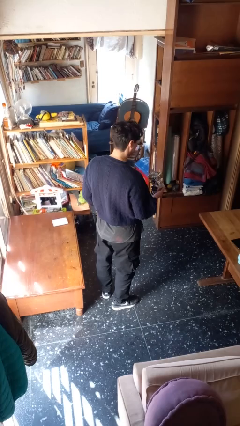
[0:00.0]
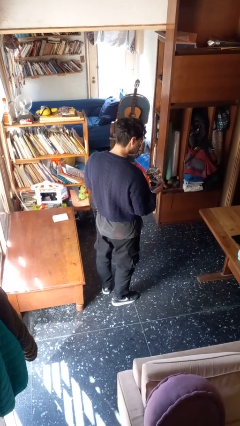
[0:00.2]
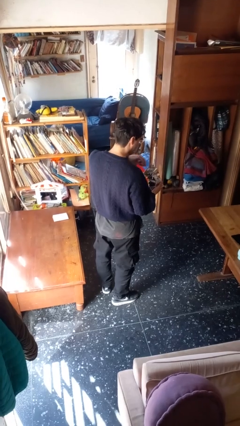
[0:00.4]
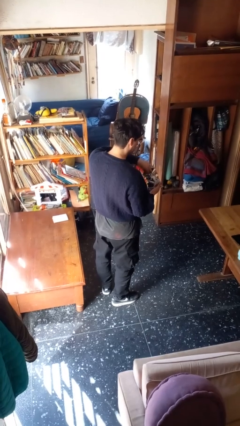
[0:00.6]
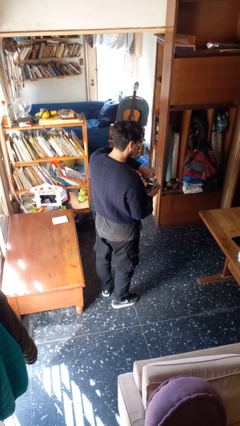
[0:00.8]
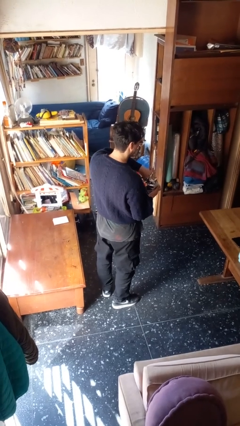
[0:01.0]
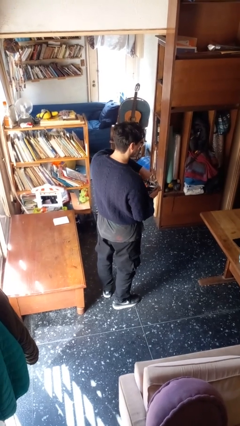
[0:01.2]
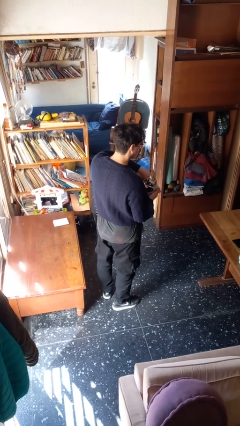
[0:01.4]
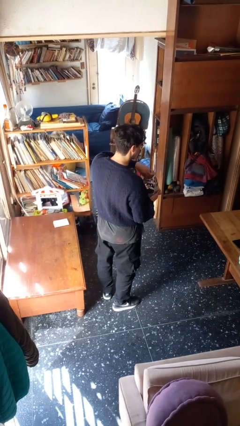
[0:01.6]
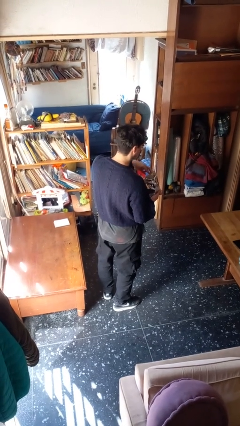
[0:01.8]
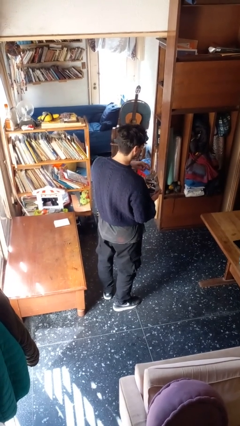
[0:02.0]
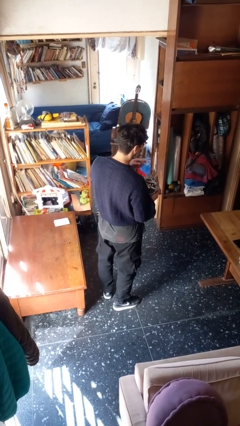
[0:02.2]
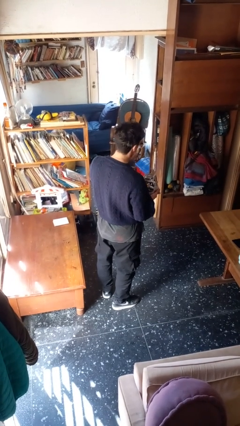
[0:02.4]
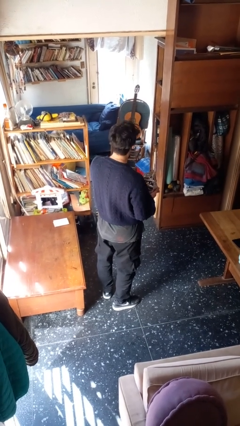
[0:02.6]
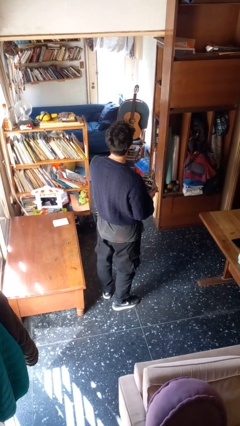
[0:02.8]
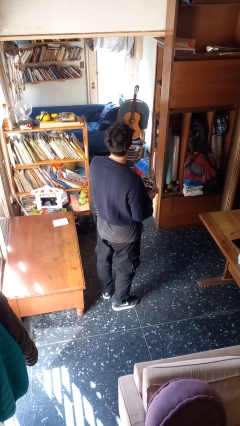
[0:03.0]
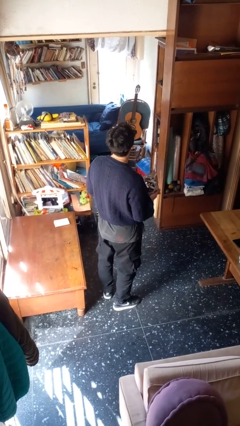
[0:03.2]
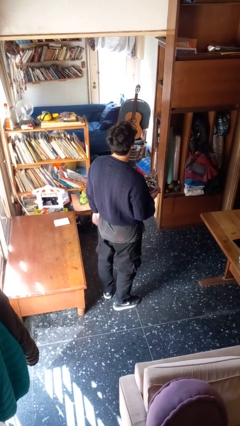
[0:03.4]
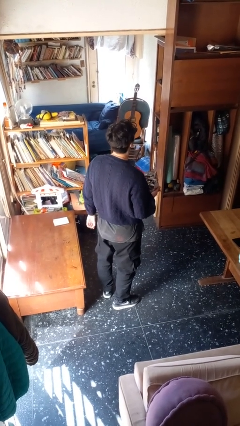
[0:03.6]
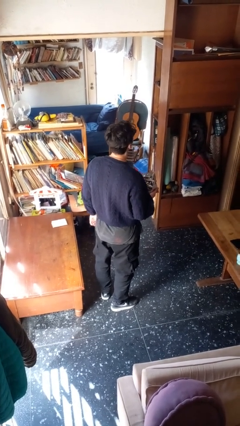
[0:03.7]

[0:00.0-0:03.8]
person eats snack from bag

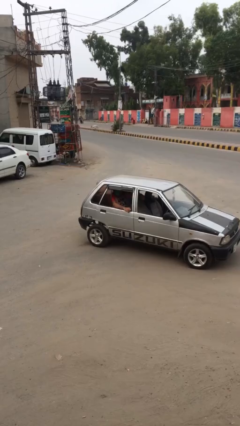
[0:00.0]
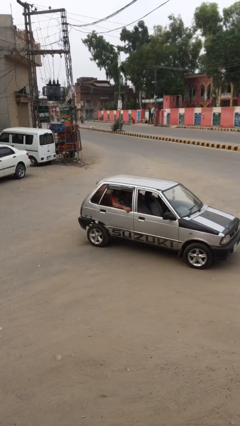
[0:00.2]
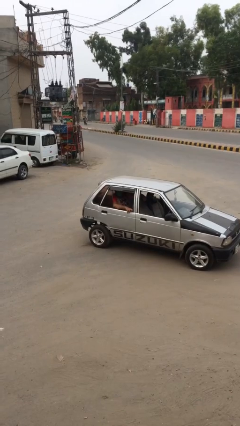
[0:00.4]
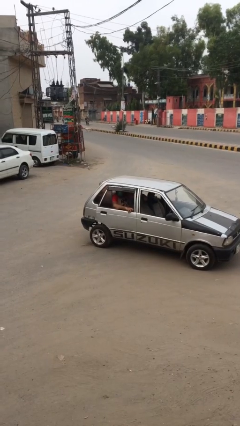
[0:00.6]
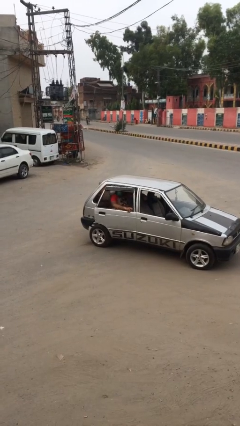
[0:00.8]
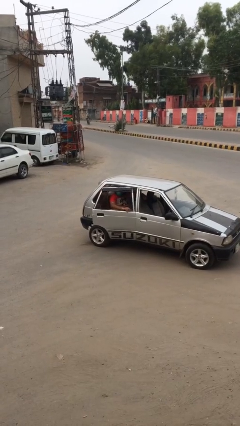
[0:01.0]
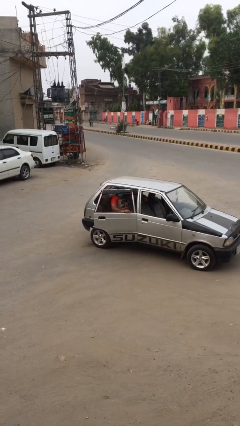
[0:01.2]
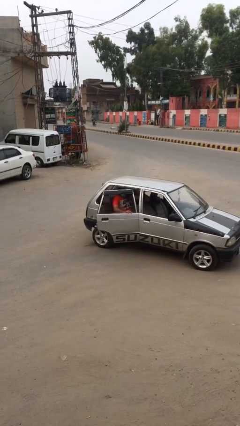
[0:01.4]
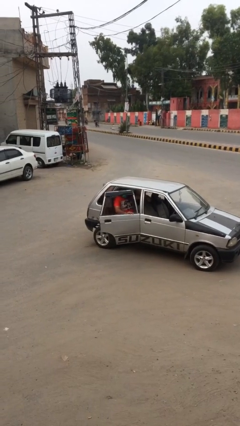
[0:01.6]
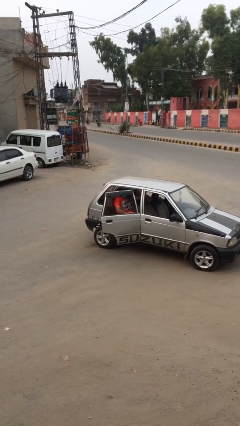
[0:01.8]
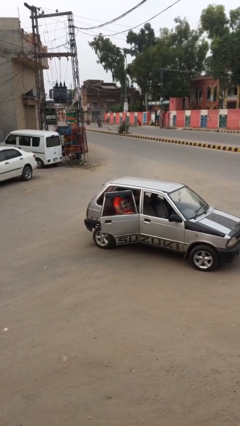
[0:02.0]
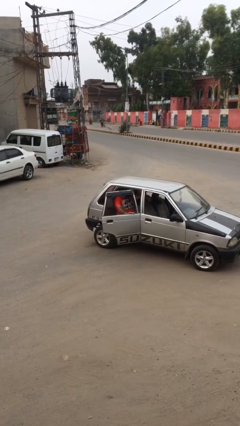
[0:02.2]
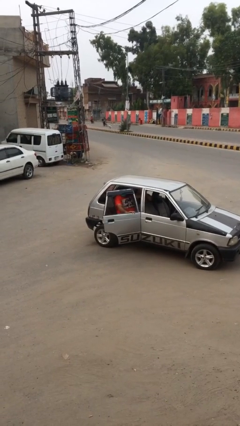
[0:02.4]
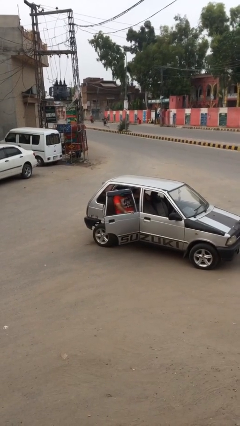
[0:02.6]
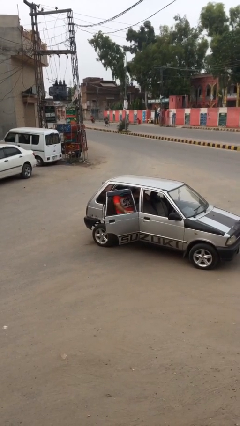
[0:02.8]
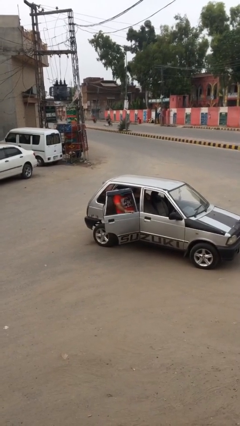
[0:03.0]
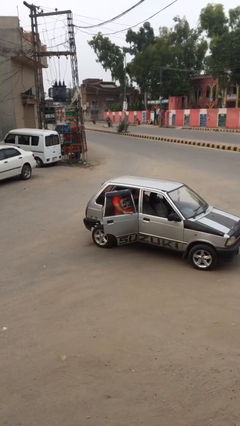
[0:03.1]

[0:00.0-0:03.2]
person opens car door

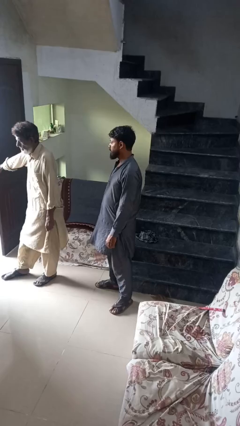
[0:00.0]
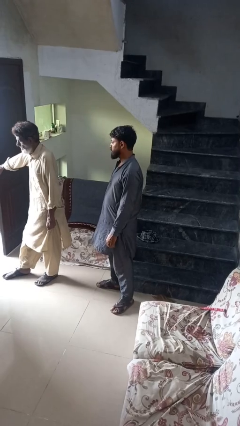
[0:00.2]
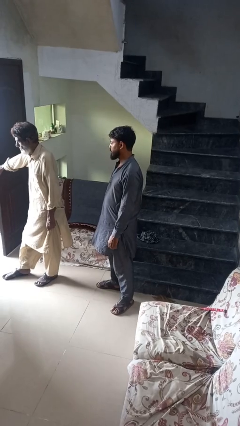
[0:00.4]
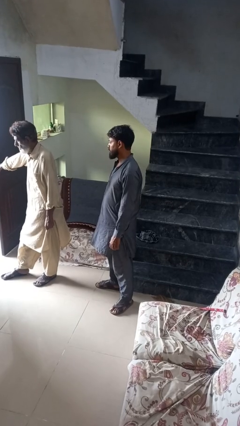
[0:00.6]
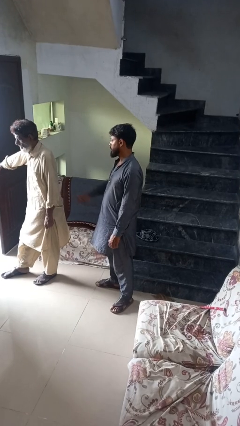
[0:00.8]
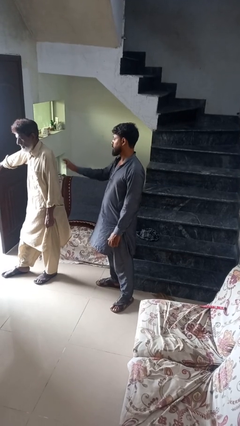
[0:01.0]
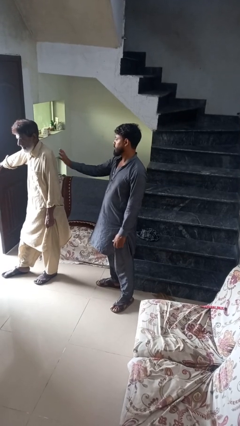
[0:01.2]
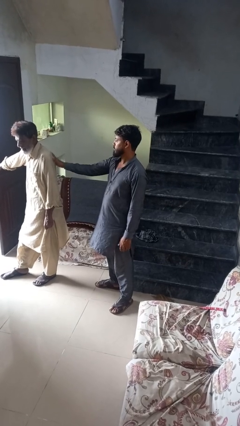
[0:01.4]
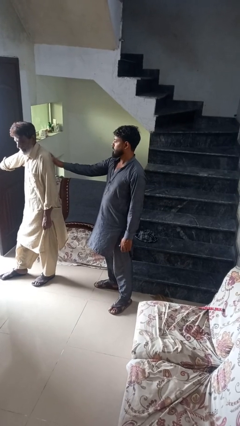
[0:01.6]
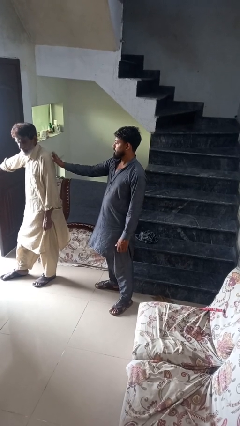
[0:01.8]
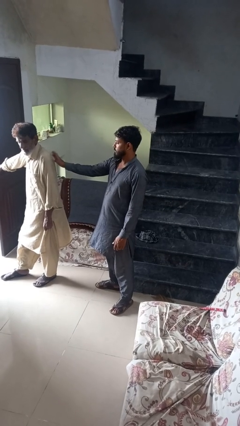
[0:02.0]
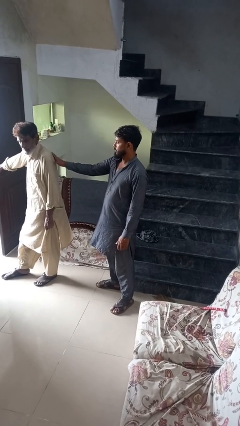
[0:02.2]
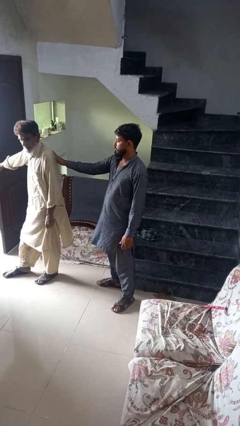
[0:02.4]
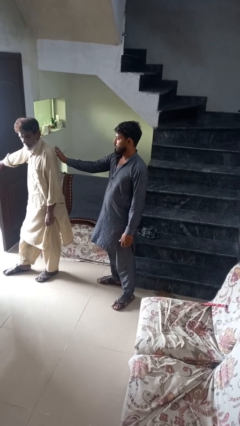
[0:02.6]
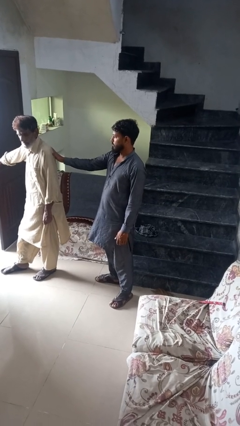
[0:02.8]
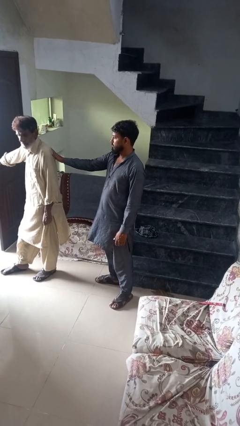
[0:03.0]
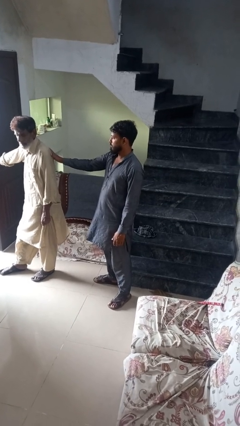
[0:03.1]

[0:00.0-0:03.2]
person touches back of person

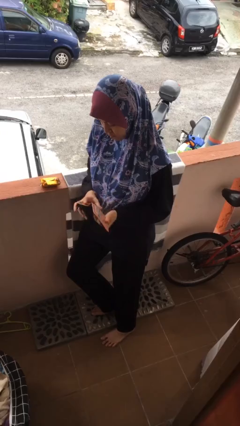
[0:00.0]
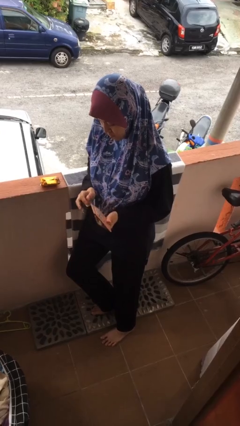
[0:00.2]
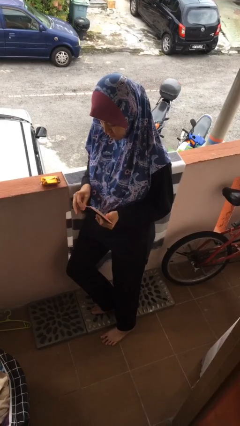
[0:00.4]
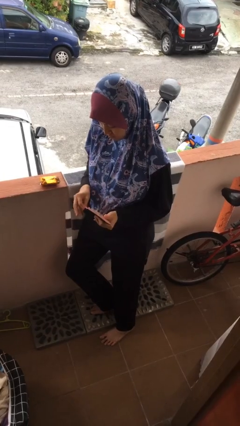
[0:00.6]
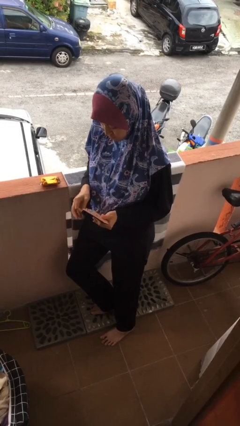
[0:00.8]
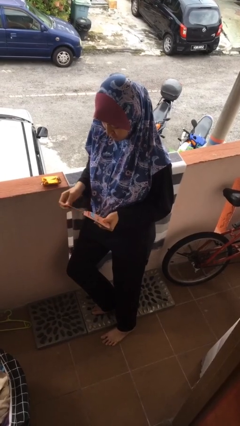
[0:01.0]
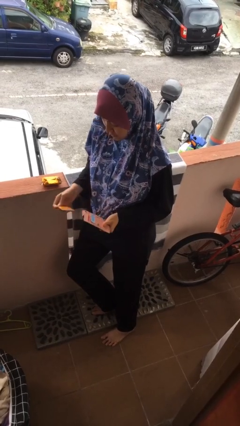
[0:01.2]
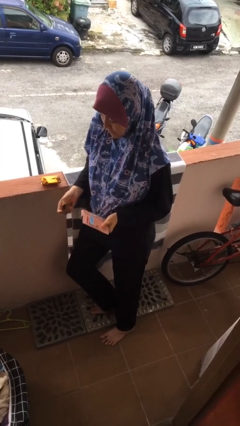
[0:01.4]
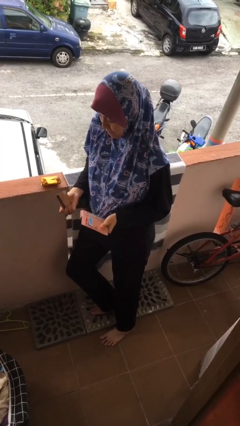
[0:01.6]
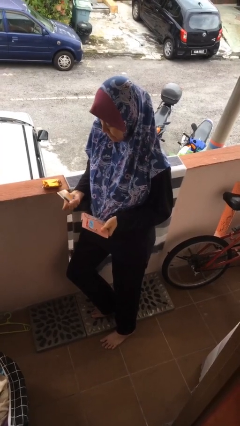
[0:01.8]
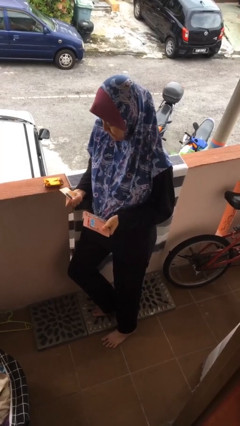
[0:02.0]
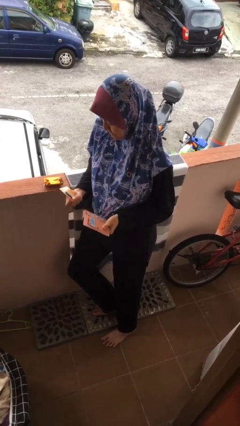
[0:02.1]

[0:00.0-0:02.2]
person takes object from purse

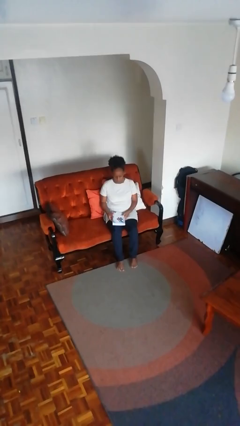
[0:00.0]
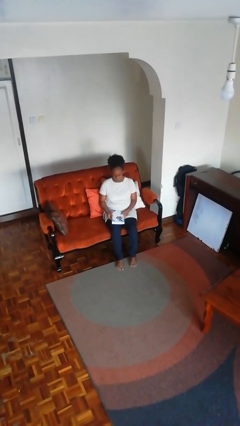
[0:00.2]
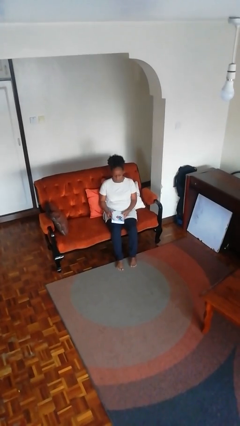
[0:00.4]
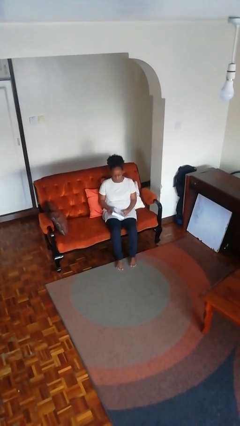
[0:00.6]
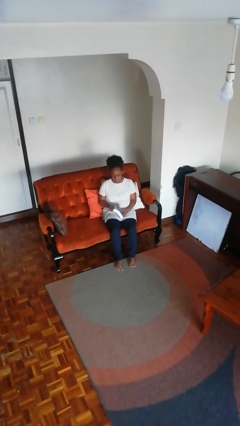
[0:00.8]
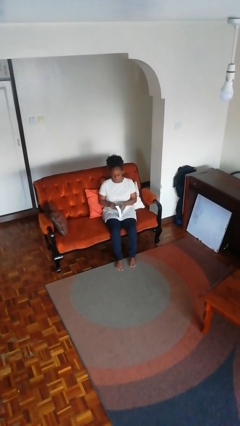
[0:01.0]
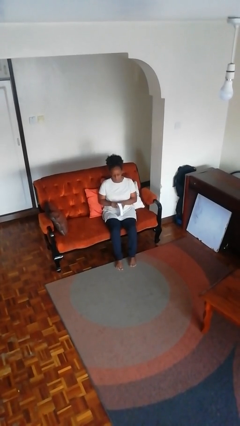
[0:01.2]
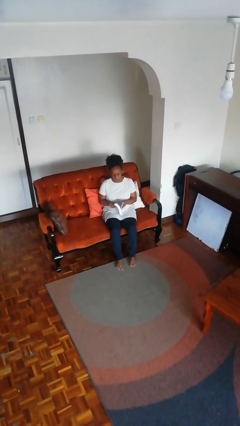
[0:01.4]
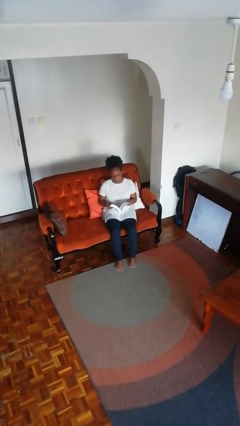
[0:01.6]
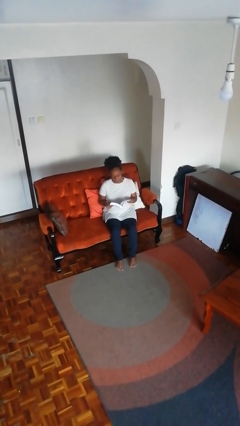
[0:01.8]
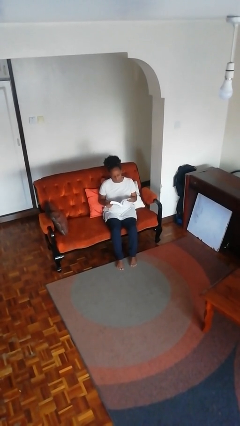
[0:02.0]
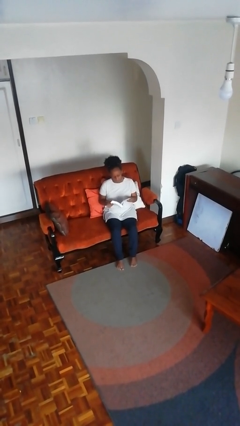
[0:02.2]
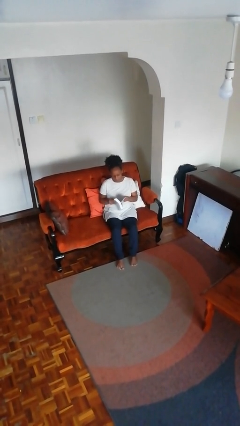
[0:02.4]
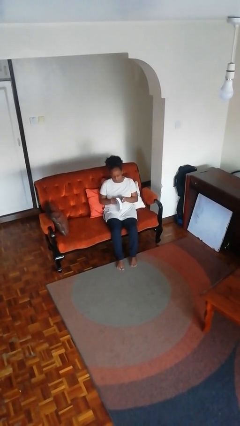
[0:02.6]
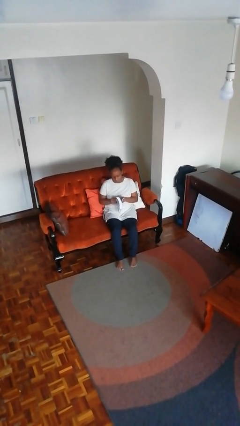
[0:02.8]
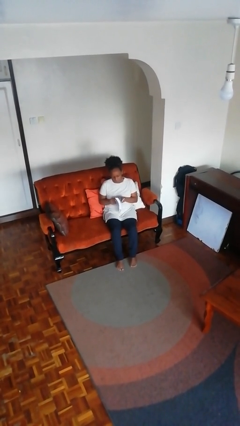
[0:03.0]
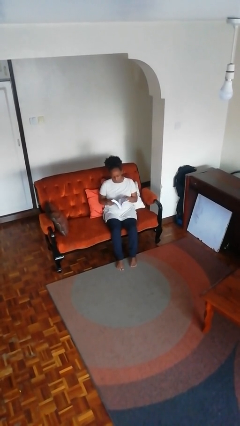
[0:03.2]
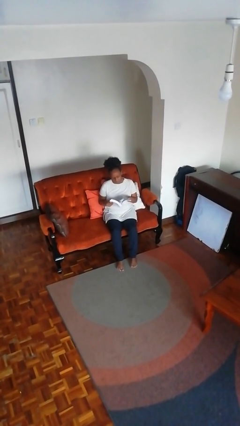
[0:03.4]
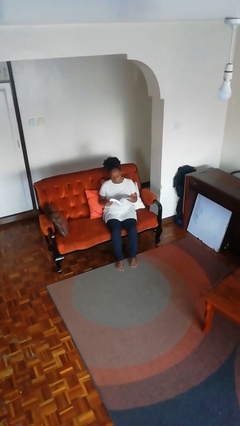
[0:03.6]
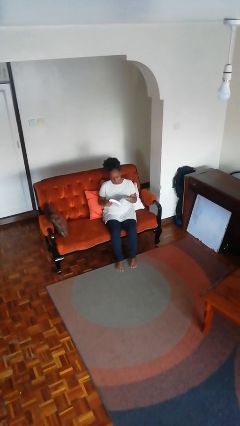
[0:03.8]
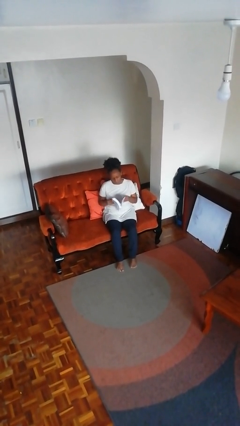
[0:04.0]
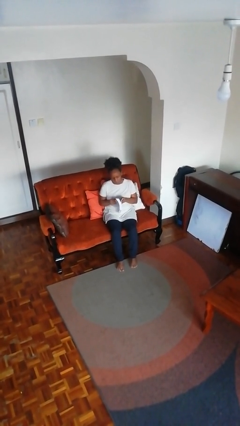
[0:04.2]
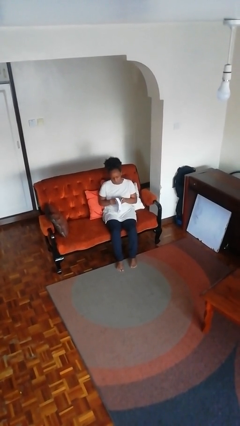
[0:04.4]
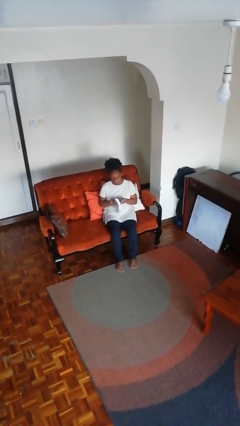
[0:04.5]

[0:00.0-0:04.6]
person reads book
